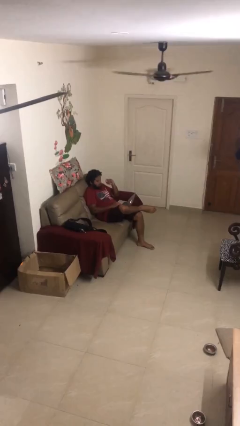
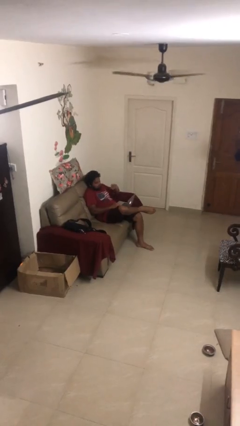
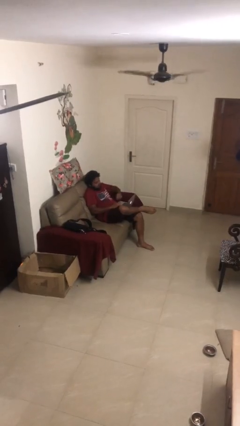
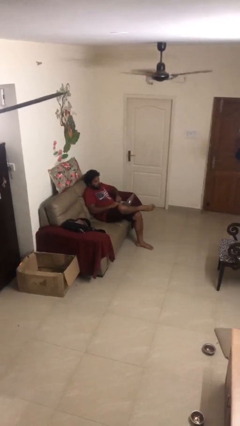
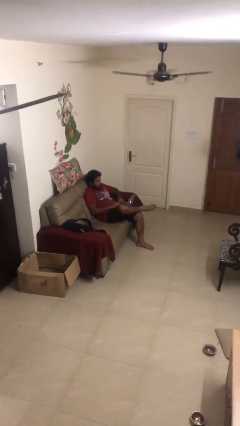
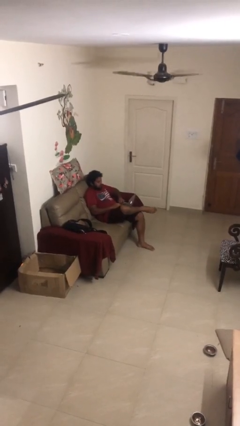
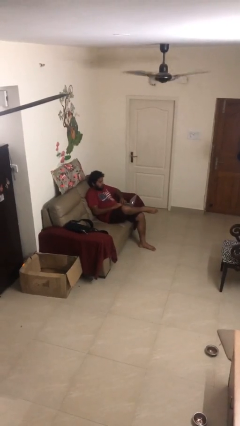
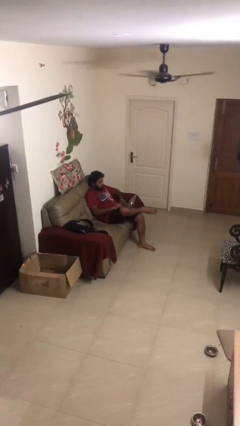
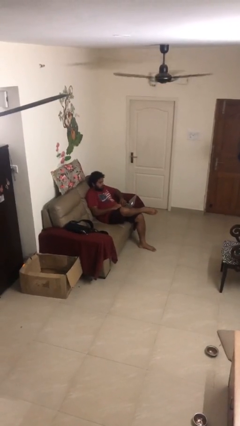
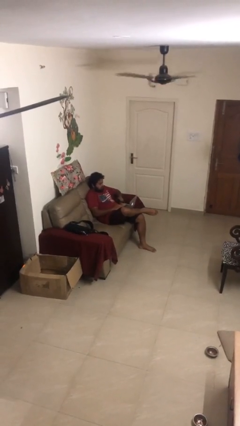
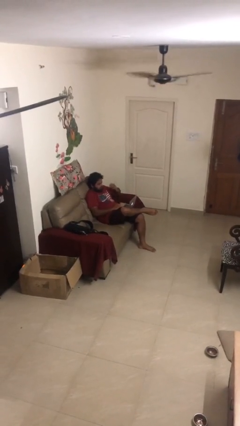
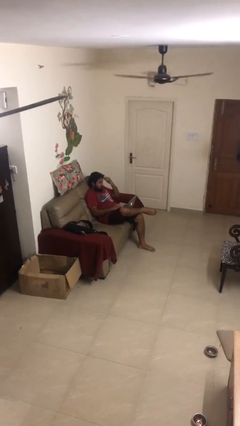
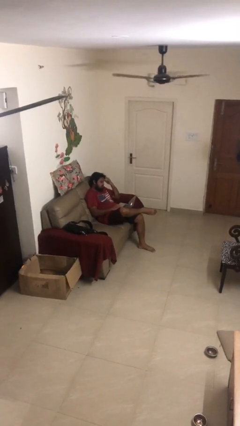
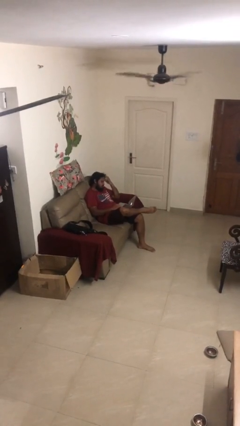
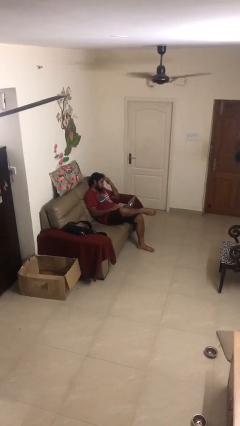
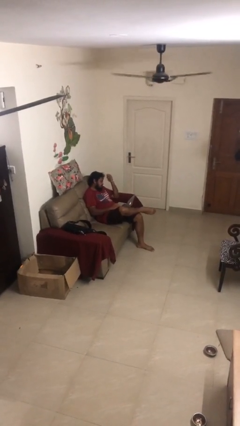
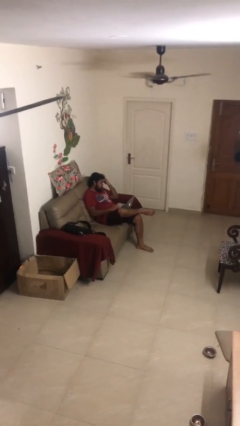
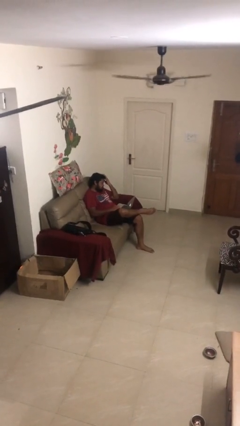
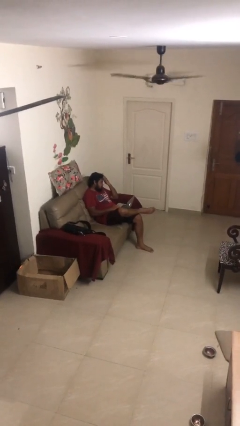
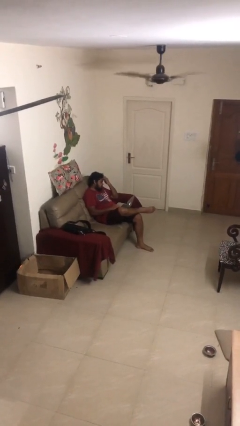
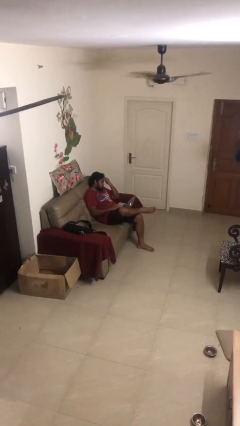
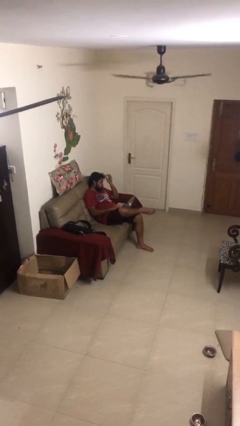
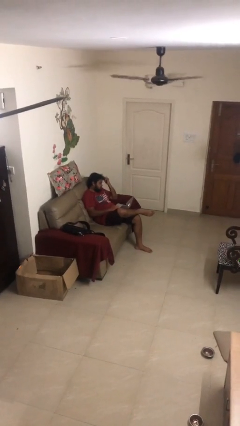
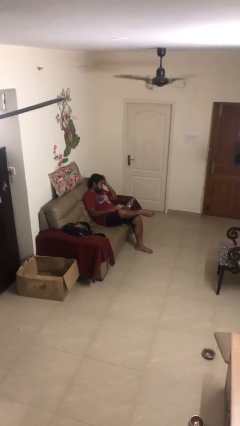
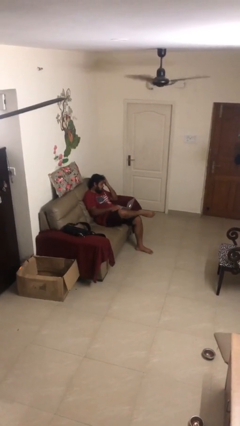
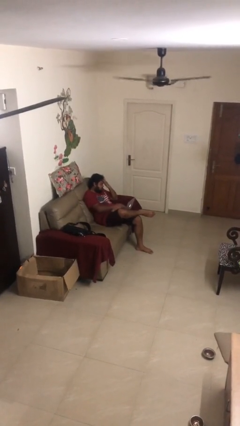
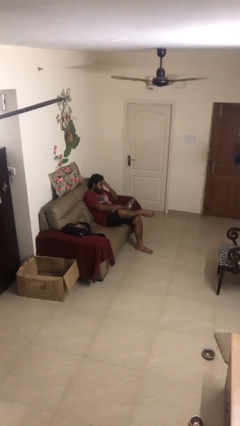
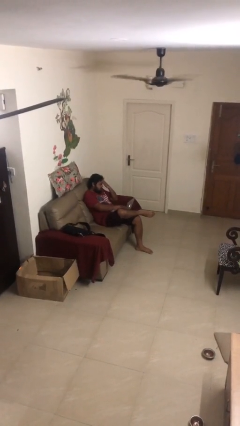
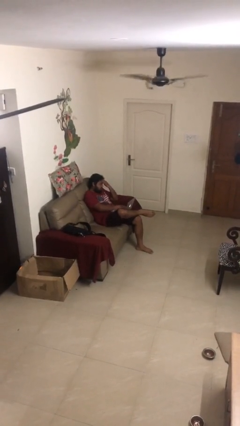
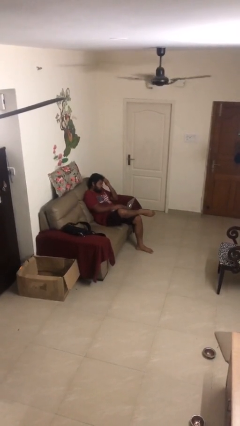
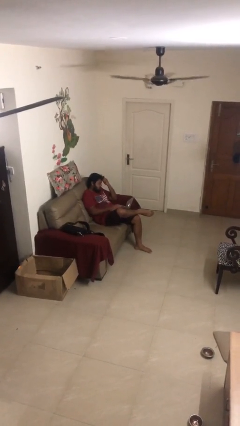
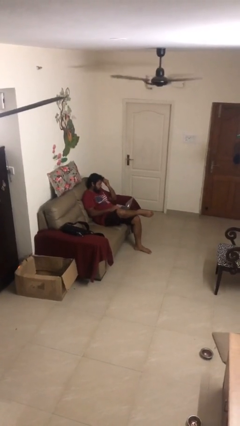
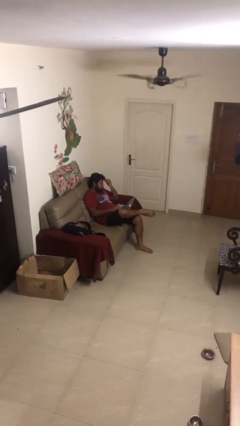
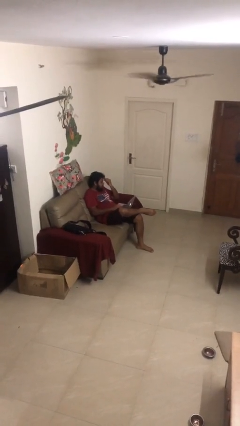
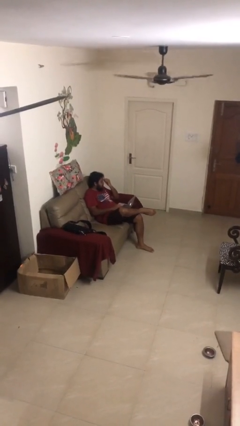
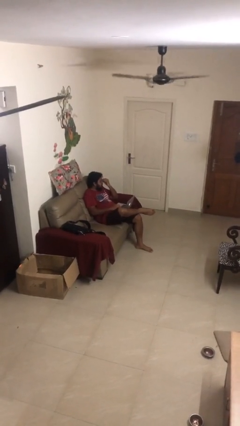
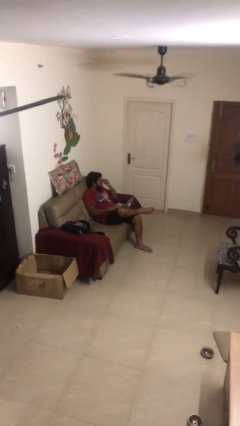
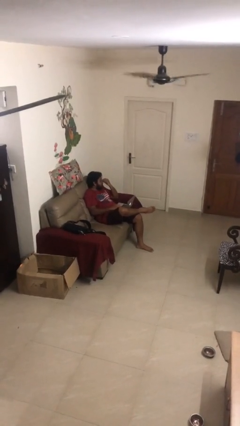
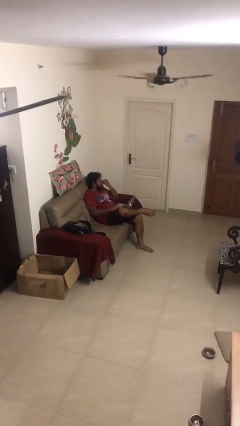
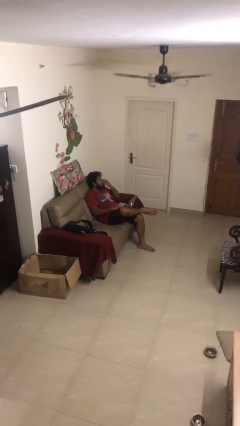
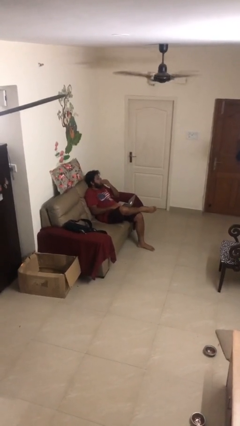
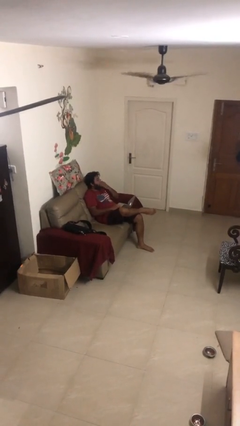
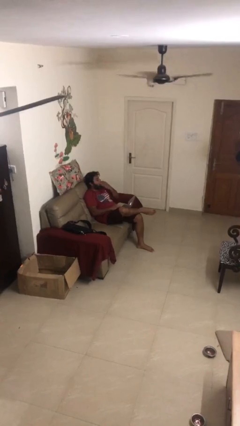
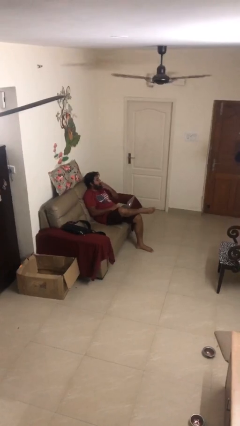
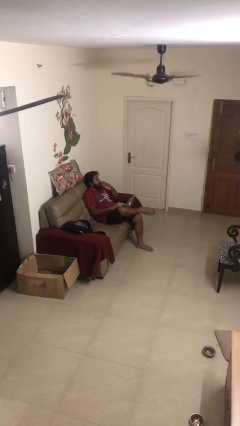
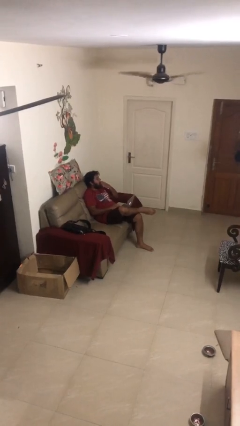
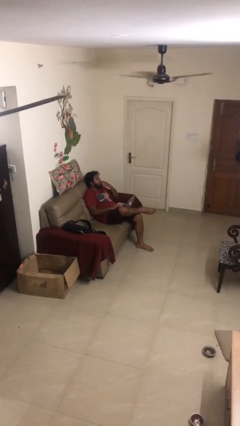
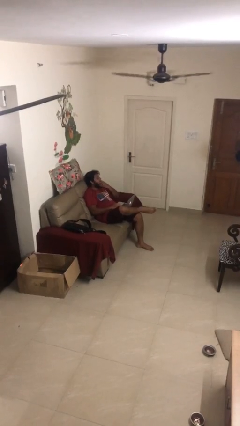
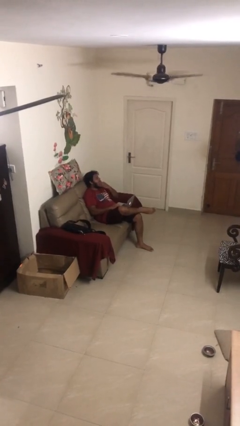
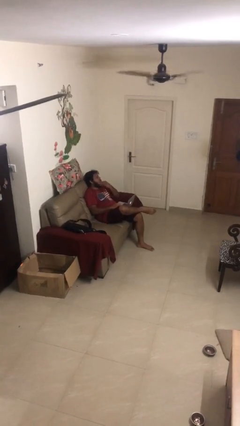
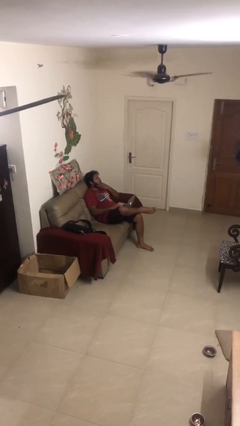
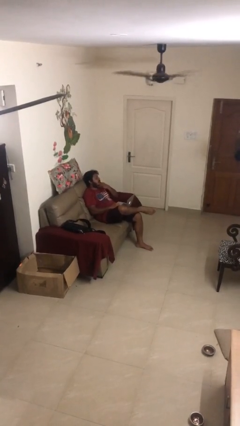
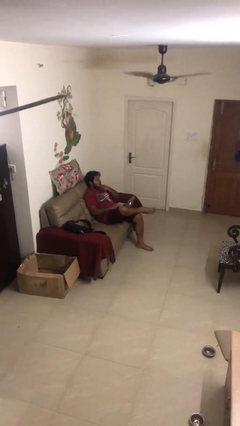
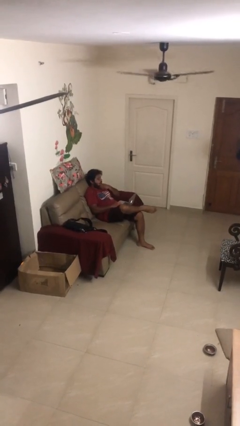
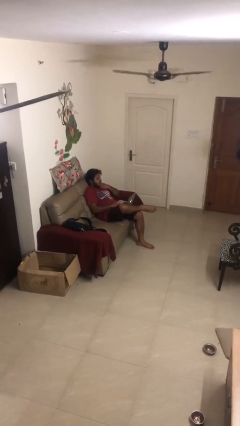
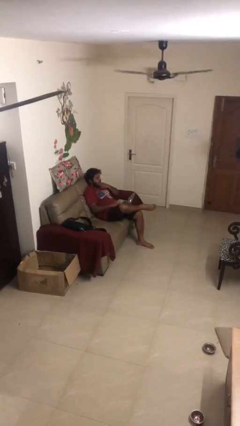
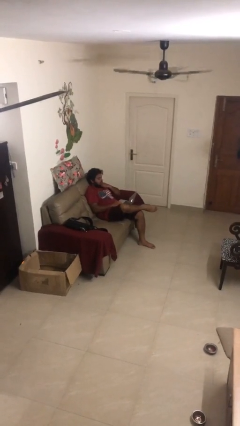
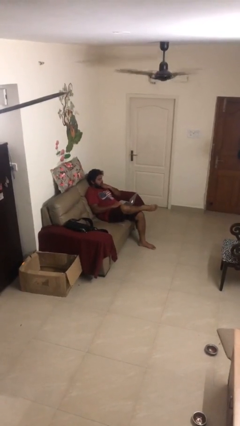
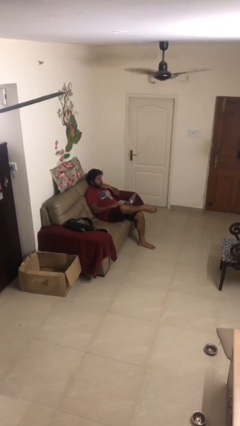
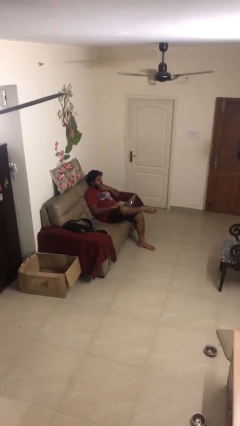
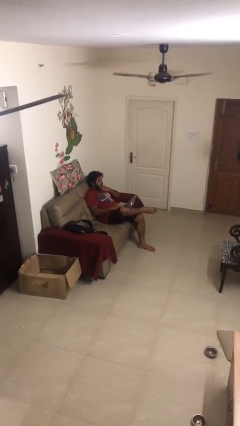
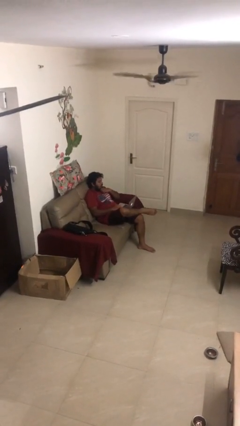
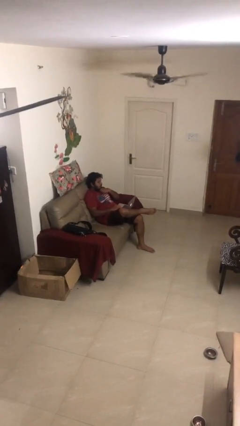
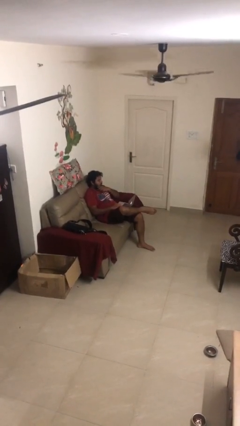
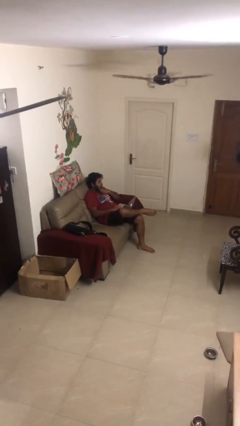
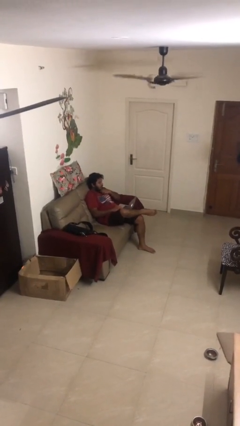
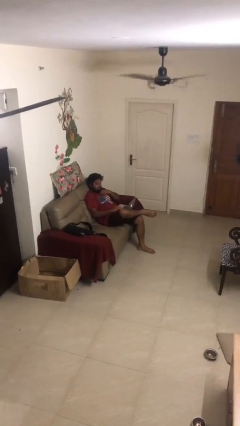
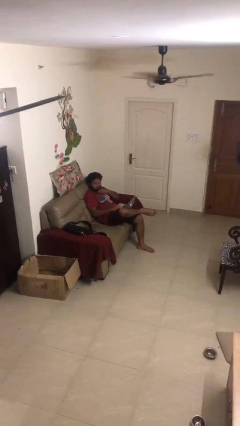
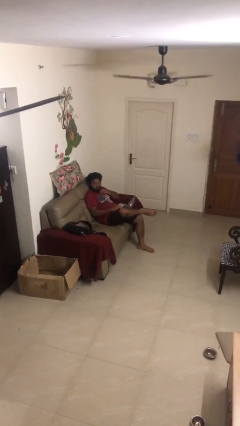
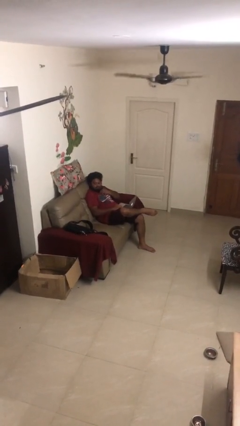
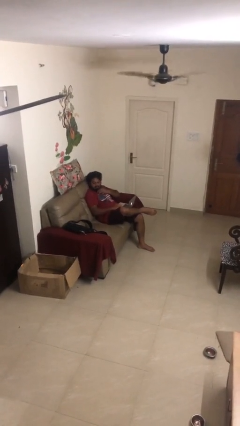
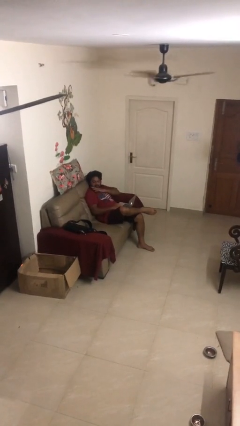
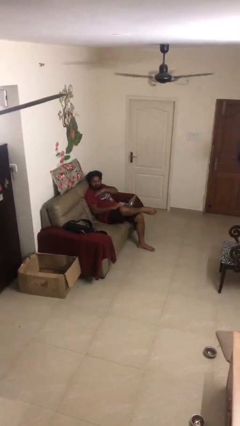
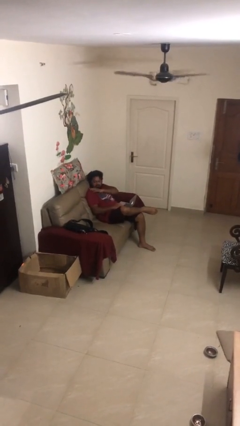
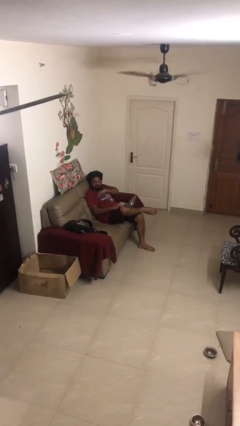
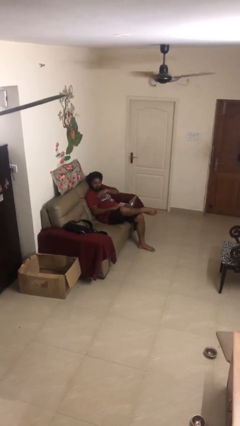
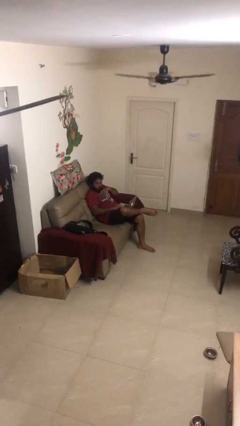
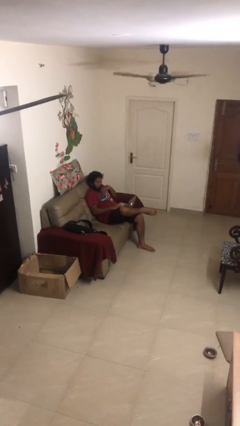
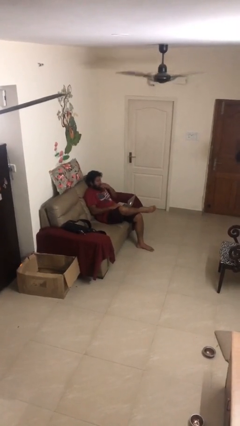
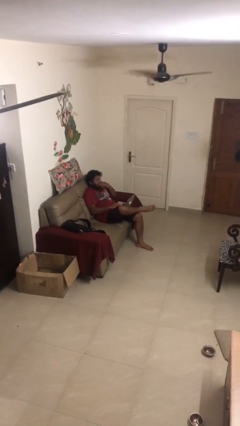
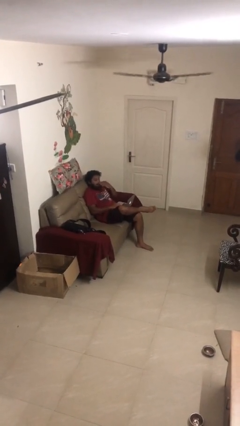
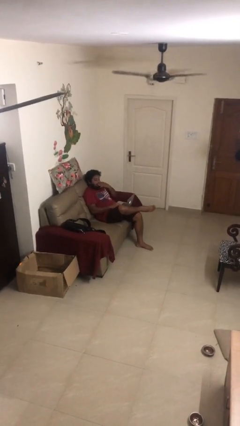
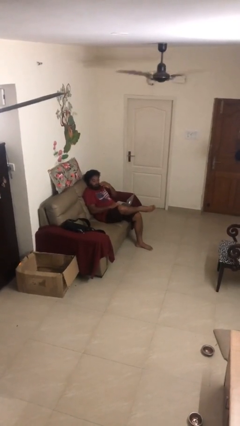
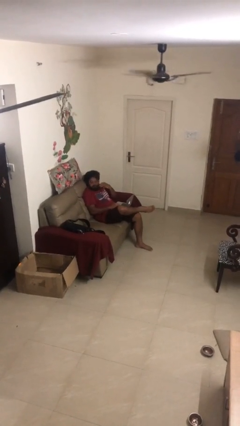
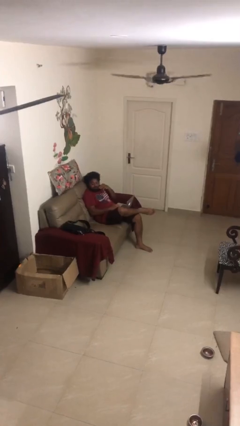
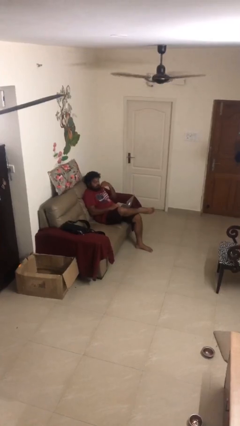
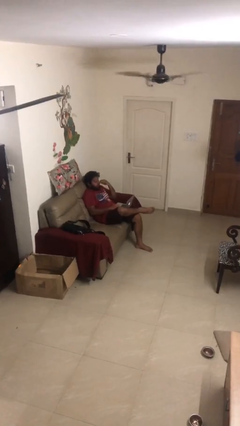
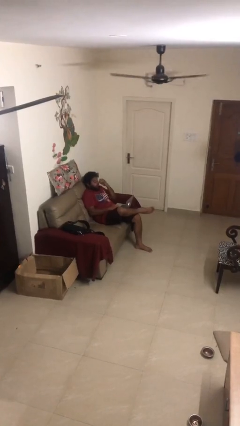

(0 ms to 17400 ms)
person interacts with laptop

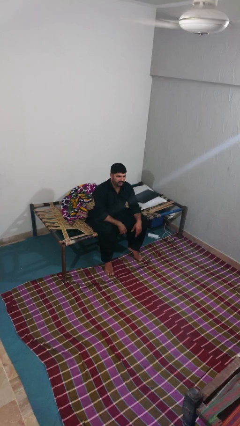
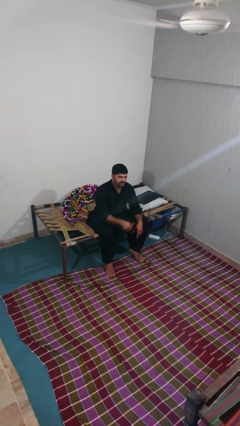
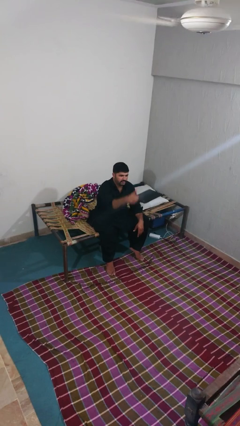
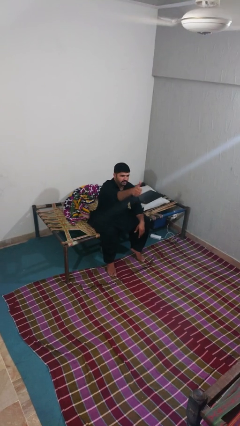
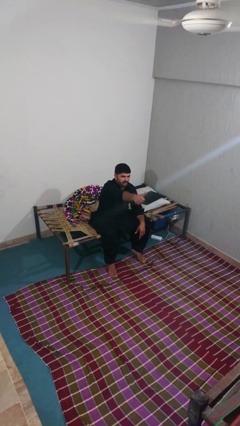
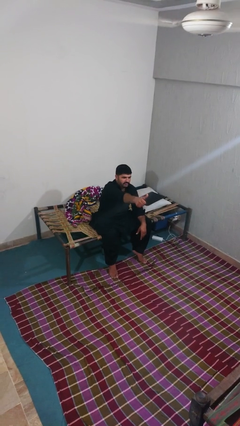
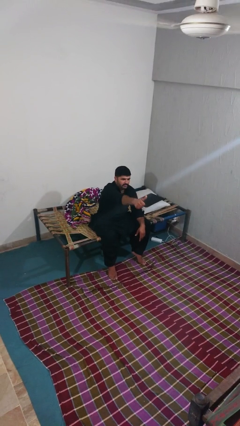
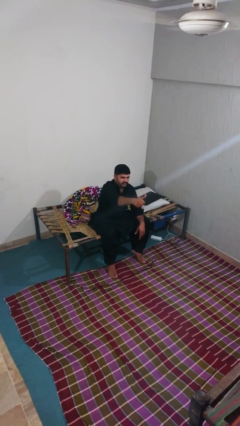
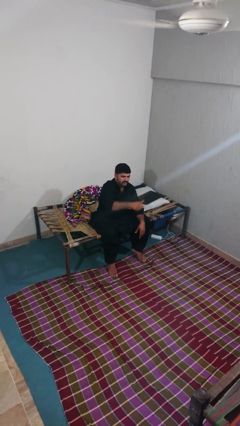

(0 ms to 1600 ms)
person gestures thumbs up
